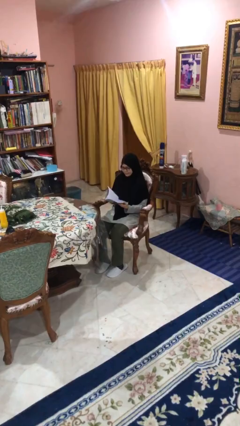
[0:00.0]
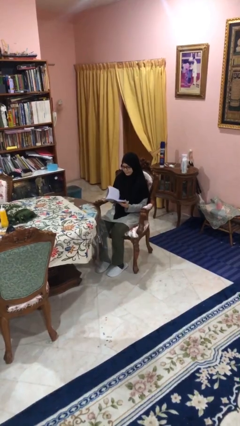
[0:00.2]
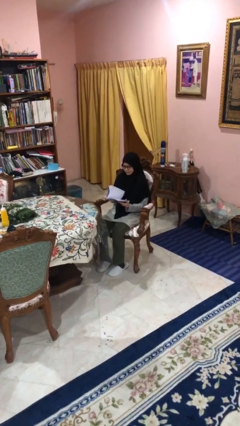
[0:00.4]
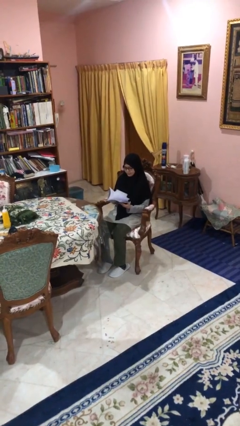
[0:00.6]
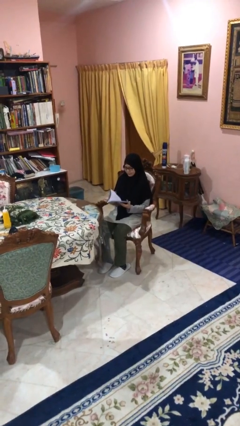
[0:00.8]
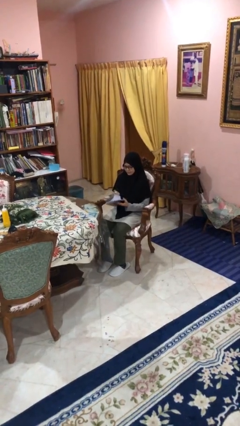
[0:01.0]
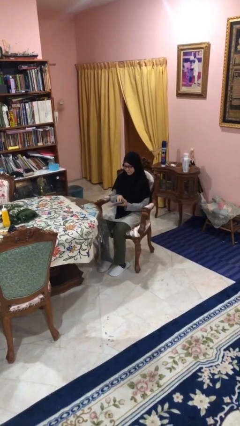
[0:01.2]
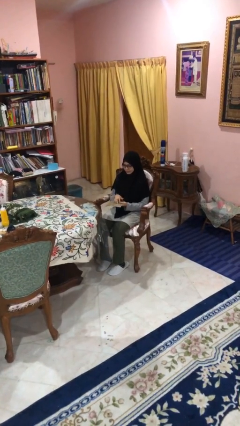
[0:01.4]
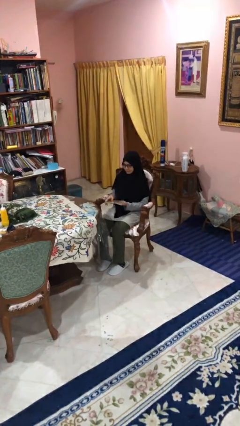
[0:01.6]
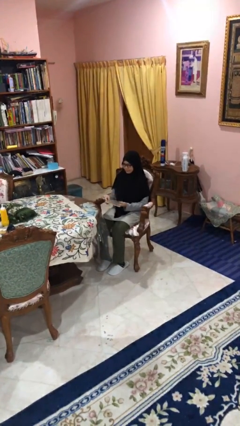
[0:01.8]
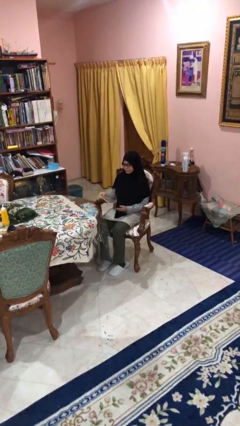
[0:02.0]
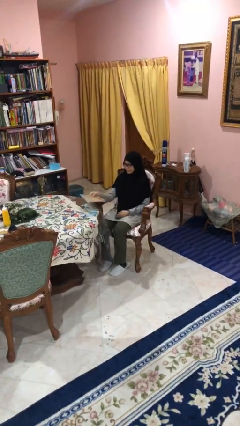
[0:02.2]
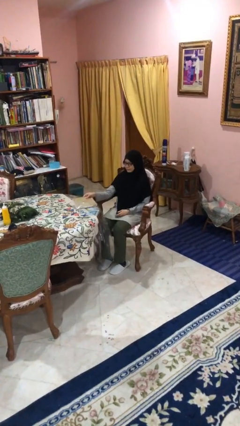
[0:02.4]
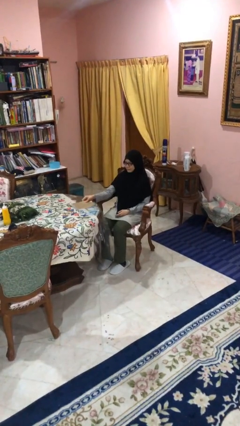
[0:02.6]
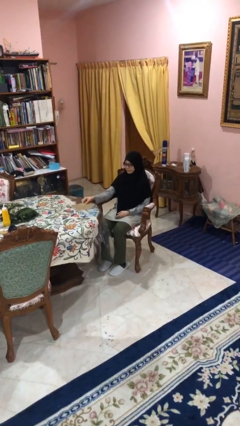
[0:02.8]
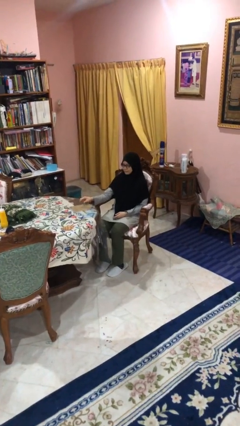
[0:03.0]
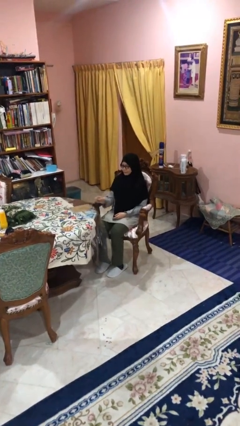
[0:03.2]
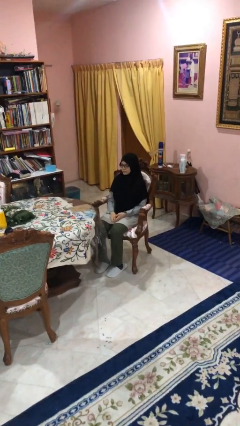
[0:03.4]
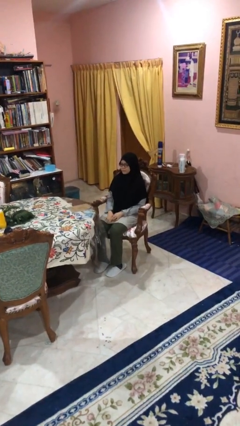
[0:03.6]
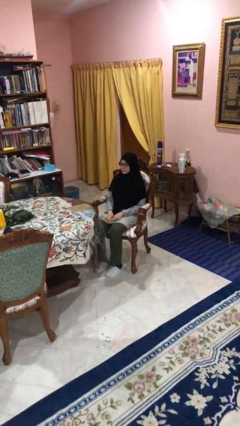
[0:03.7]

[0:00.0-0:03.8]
person puts down object on table

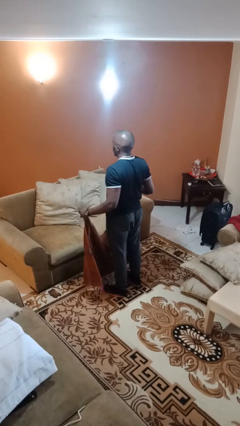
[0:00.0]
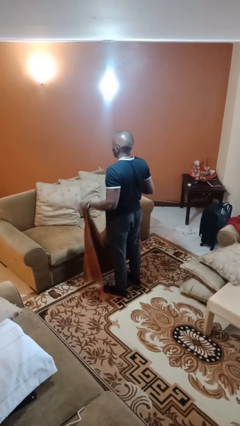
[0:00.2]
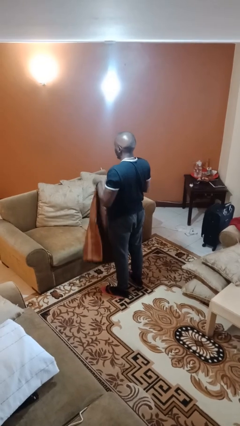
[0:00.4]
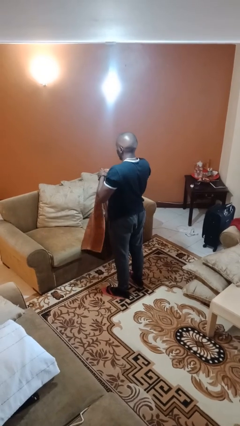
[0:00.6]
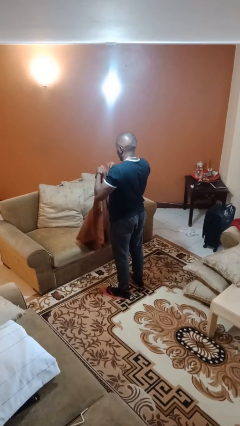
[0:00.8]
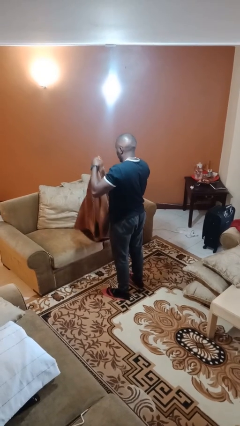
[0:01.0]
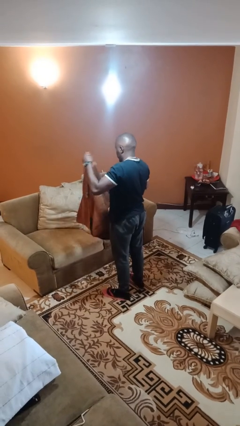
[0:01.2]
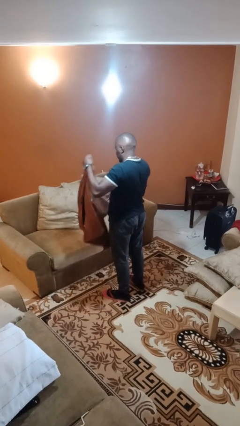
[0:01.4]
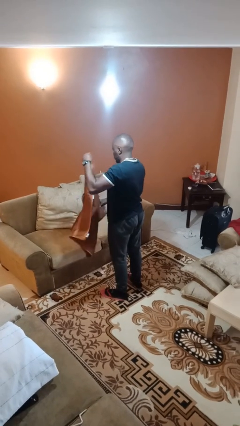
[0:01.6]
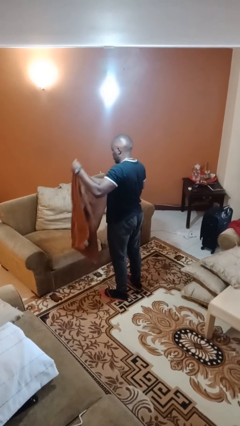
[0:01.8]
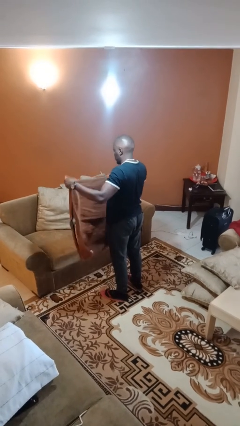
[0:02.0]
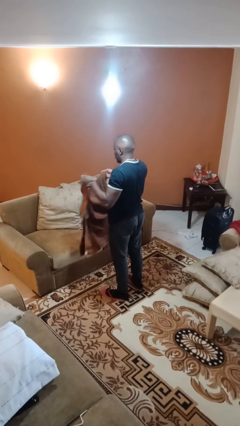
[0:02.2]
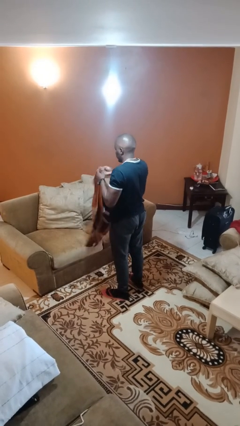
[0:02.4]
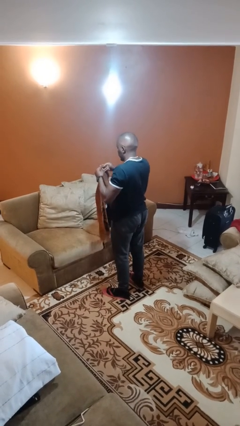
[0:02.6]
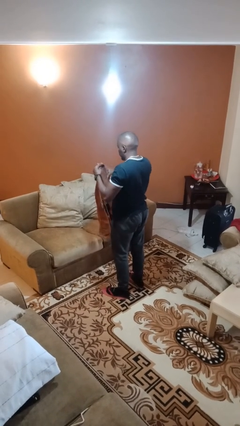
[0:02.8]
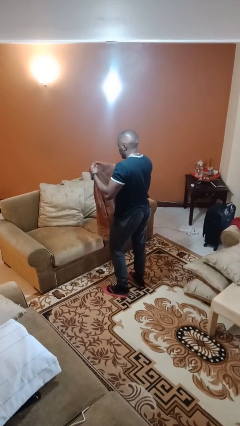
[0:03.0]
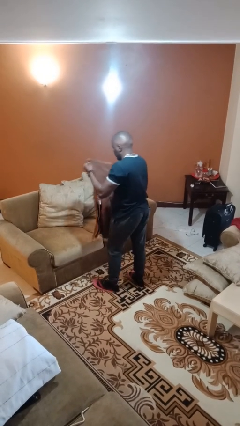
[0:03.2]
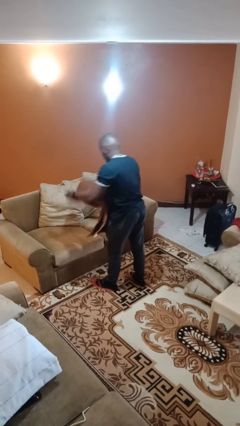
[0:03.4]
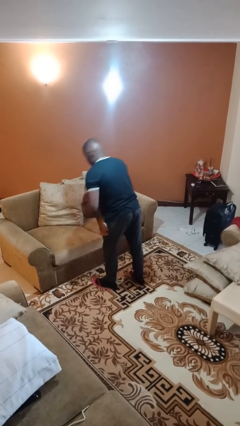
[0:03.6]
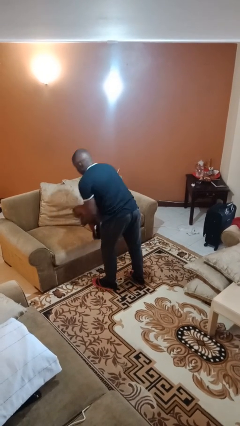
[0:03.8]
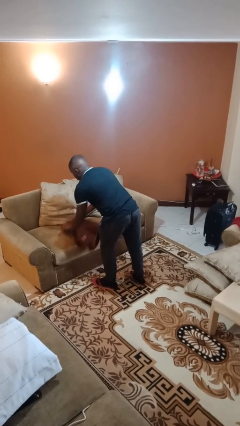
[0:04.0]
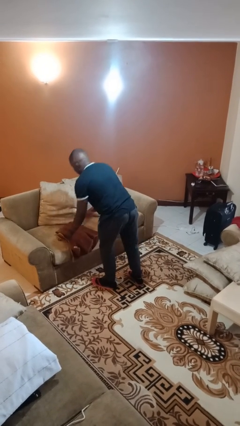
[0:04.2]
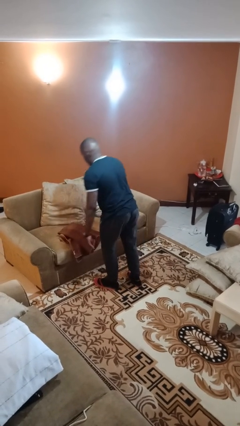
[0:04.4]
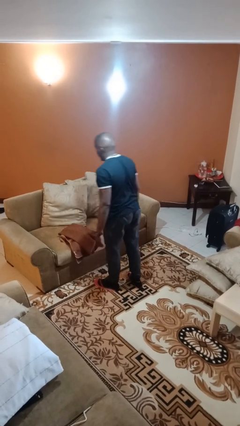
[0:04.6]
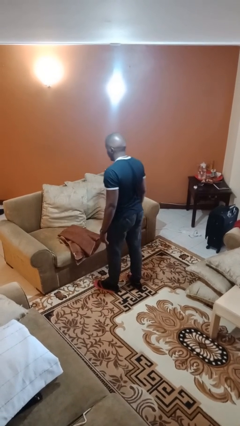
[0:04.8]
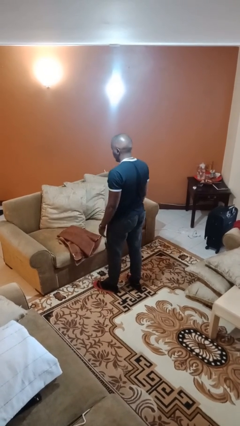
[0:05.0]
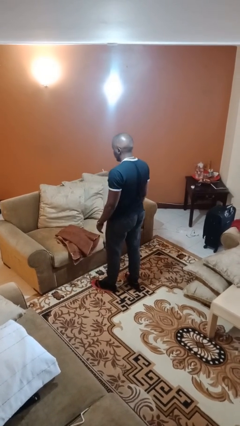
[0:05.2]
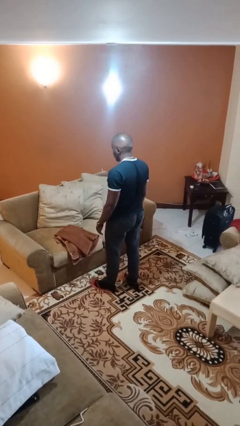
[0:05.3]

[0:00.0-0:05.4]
person folds towel

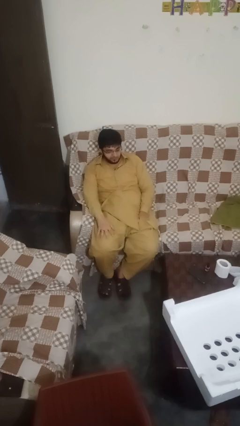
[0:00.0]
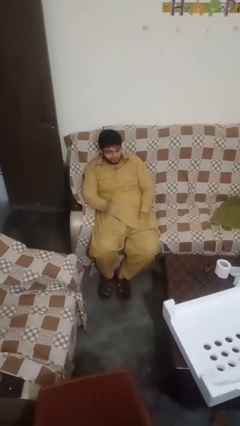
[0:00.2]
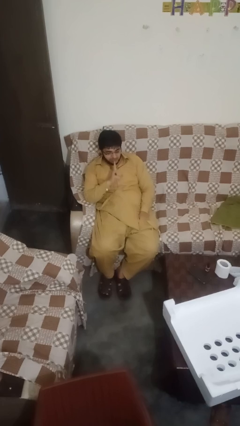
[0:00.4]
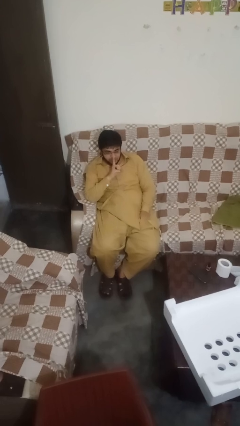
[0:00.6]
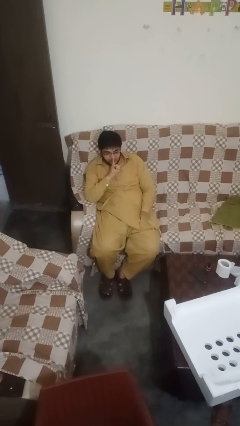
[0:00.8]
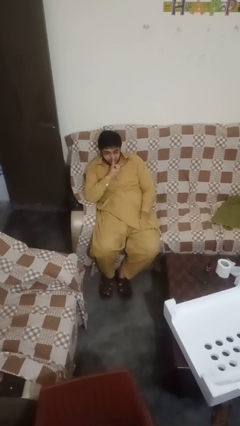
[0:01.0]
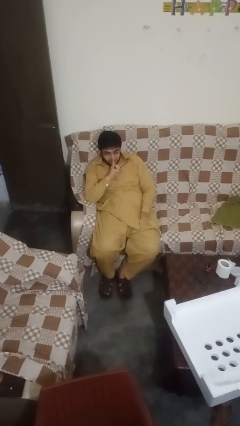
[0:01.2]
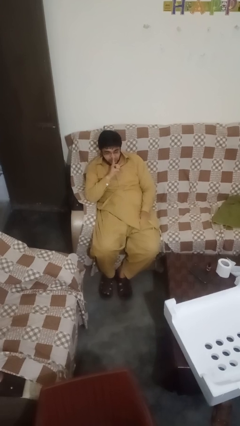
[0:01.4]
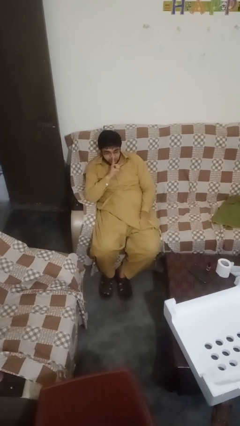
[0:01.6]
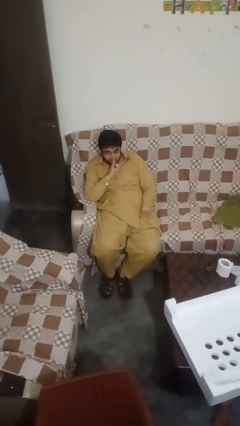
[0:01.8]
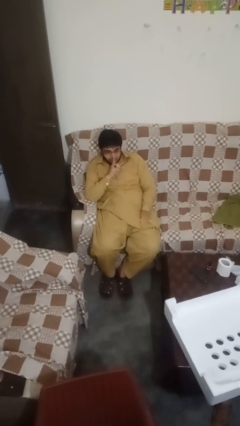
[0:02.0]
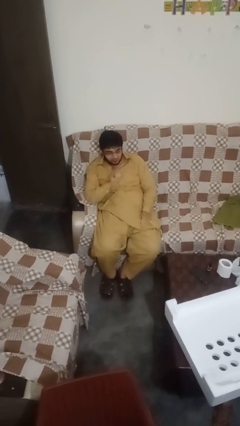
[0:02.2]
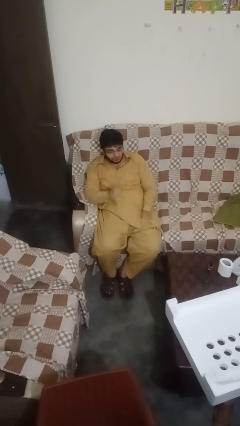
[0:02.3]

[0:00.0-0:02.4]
person gestures be quiet

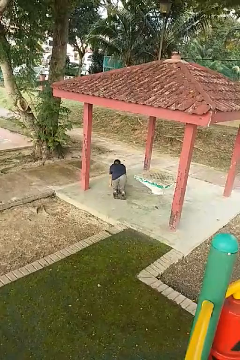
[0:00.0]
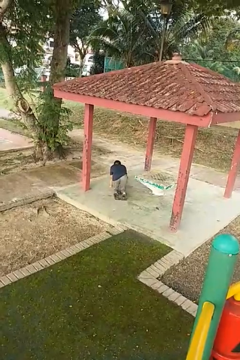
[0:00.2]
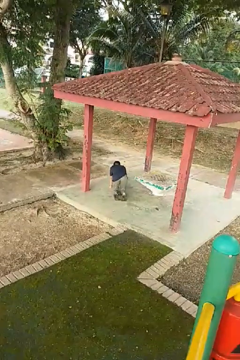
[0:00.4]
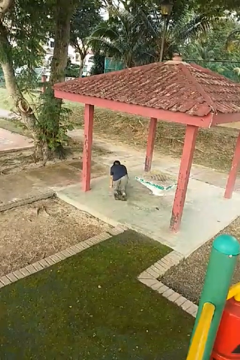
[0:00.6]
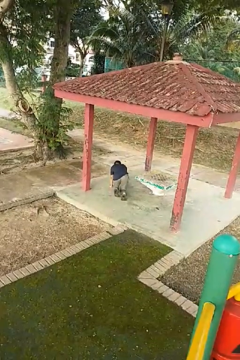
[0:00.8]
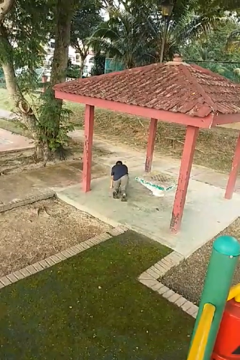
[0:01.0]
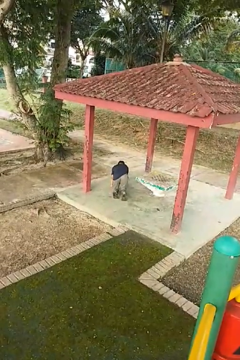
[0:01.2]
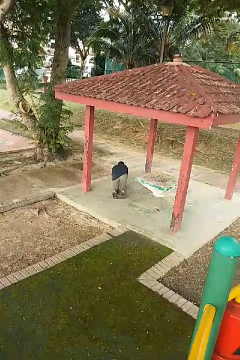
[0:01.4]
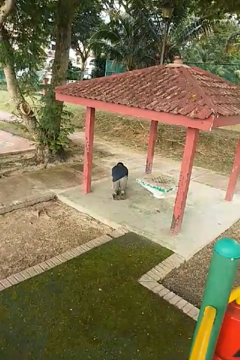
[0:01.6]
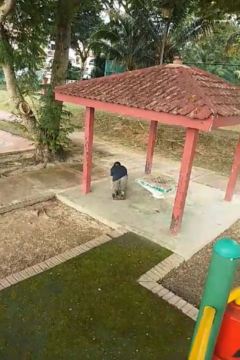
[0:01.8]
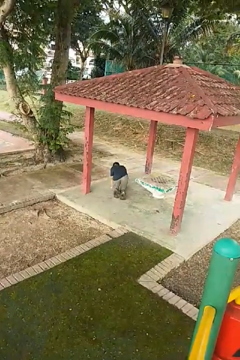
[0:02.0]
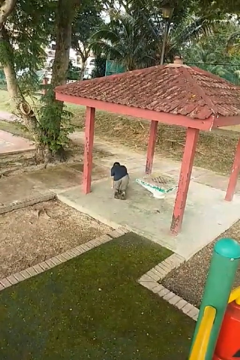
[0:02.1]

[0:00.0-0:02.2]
person crawls

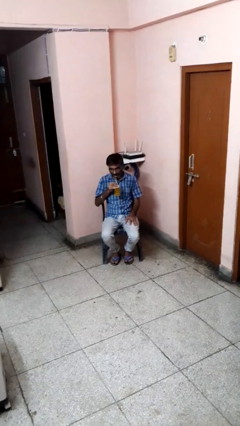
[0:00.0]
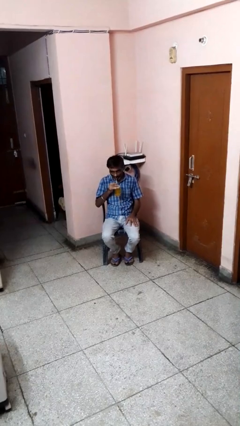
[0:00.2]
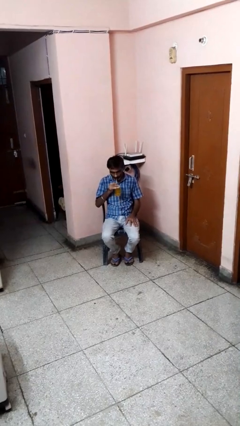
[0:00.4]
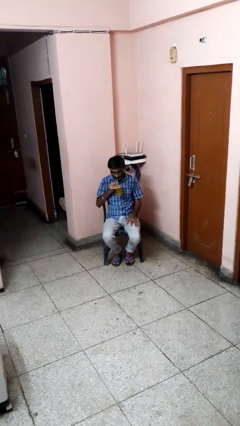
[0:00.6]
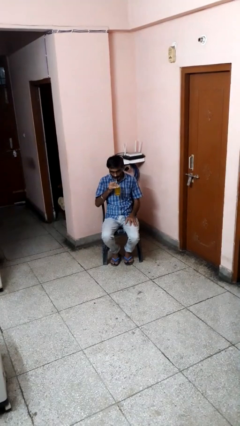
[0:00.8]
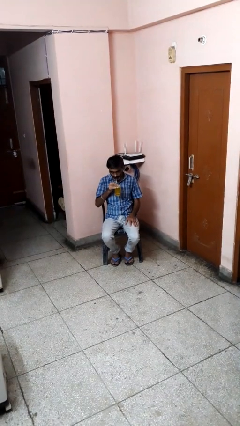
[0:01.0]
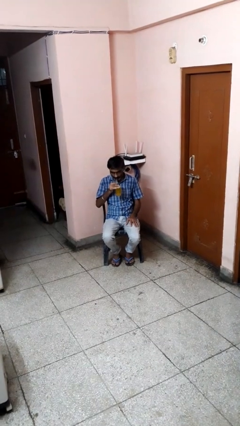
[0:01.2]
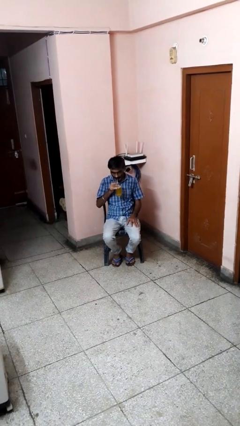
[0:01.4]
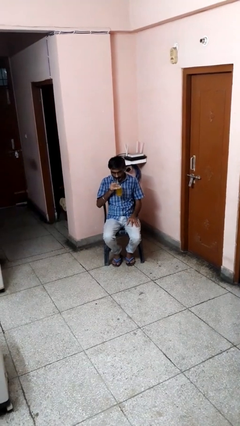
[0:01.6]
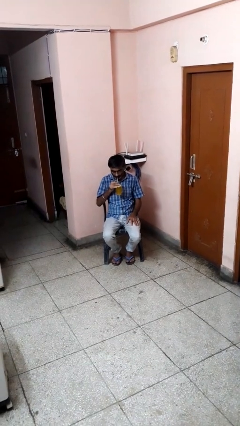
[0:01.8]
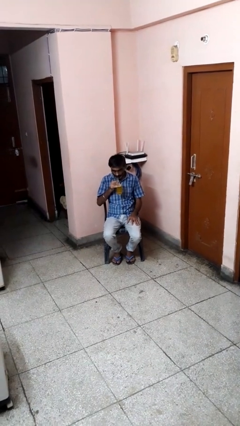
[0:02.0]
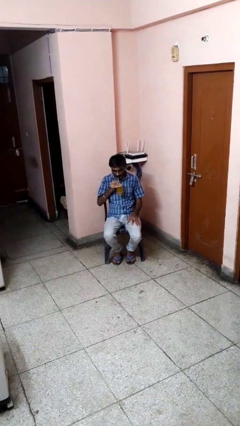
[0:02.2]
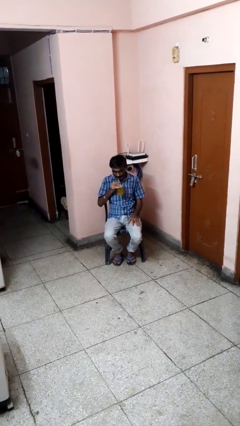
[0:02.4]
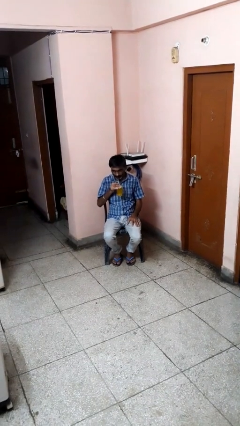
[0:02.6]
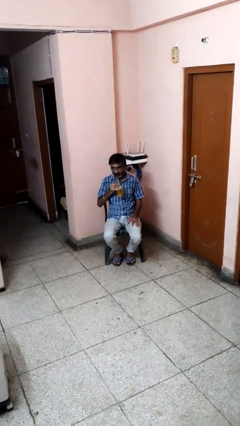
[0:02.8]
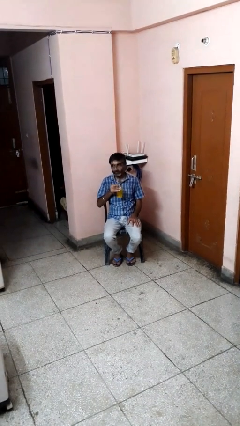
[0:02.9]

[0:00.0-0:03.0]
person drinks from straw

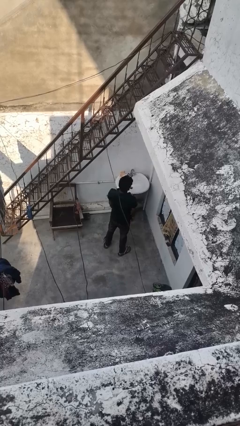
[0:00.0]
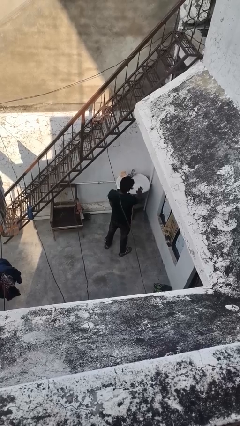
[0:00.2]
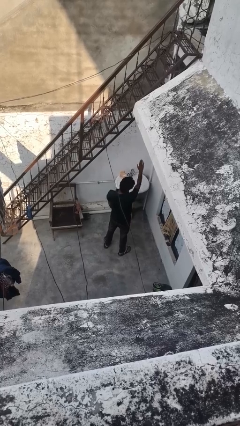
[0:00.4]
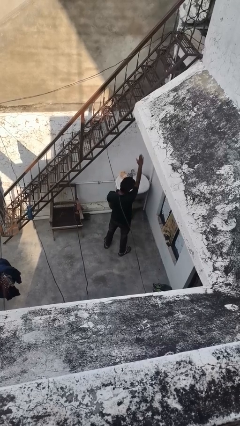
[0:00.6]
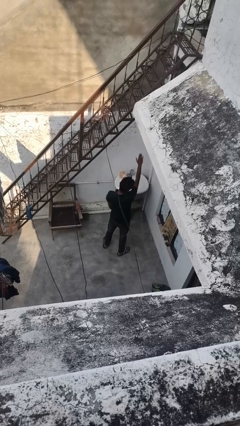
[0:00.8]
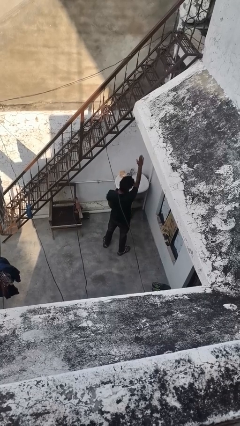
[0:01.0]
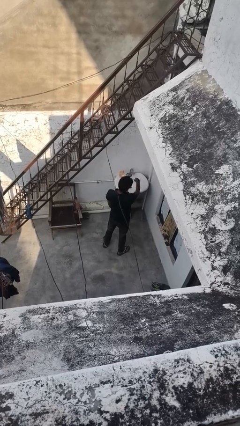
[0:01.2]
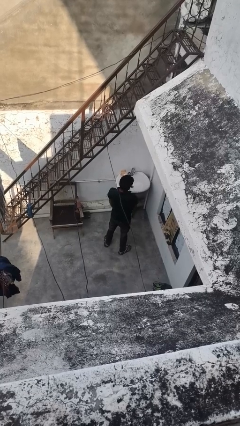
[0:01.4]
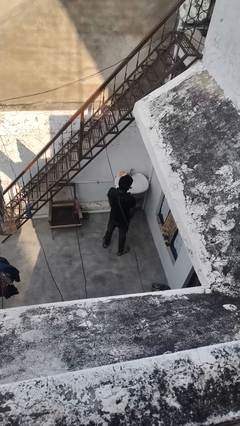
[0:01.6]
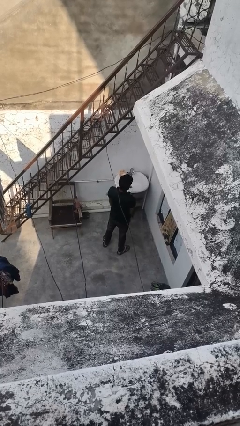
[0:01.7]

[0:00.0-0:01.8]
person gestures stop
